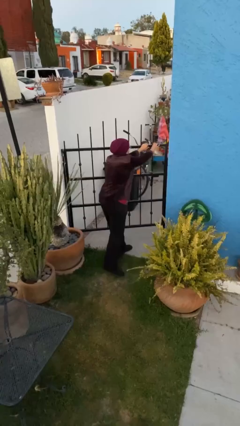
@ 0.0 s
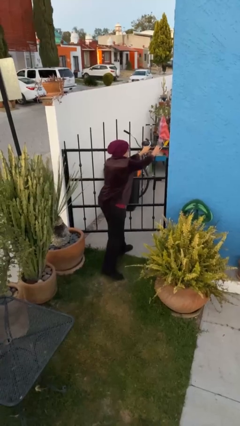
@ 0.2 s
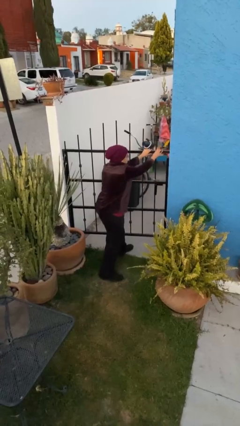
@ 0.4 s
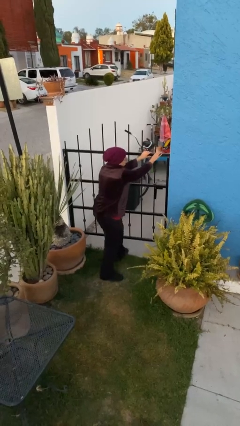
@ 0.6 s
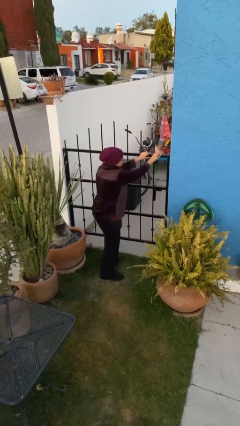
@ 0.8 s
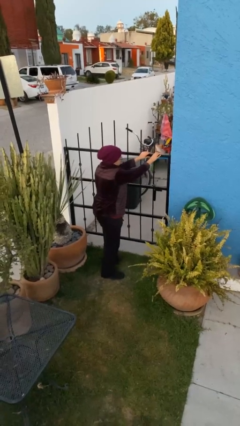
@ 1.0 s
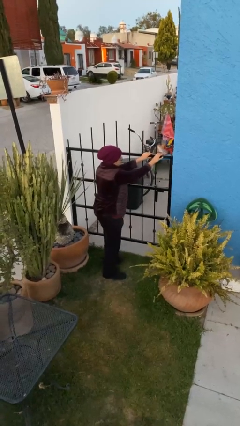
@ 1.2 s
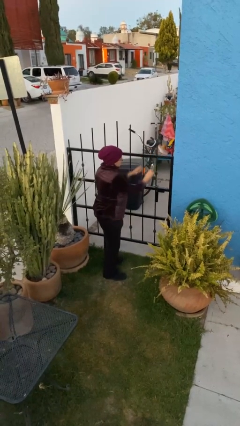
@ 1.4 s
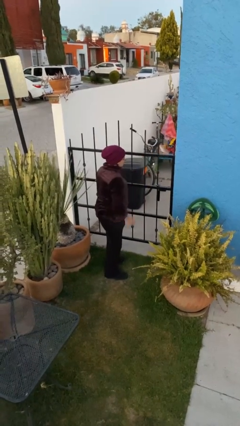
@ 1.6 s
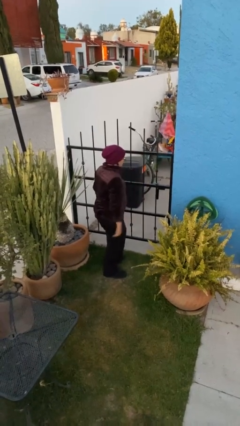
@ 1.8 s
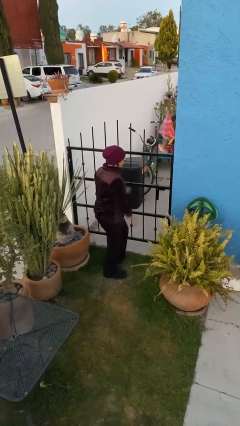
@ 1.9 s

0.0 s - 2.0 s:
person closes facility door

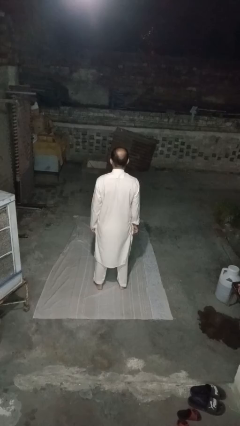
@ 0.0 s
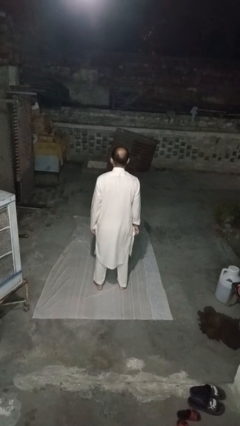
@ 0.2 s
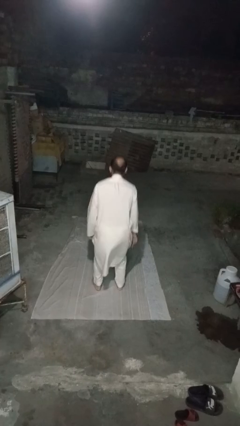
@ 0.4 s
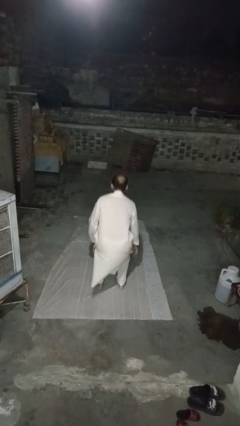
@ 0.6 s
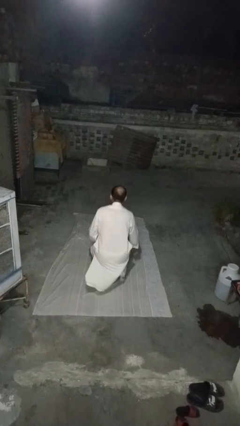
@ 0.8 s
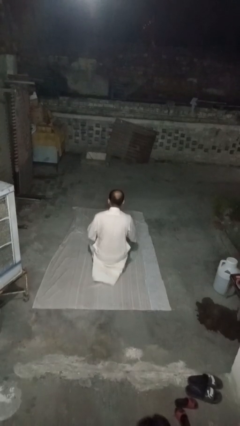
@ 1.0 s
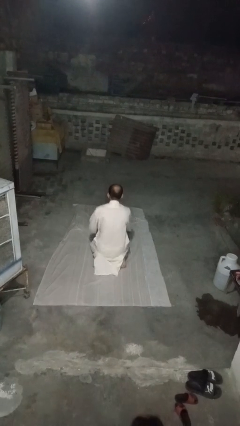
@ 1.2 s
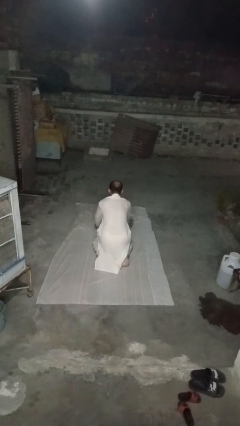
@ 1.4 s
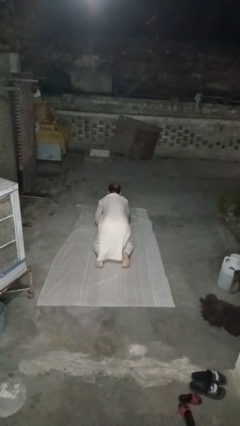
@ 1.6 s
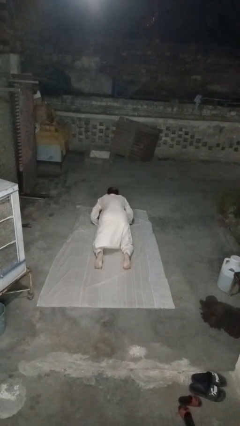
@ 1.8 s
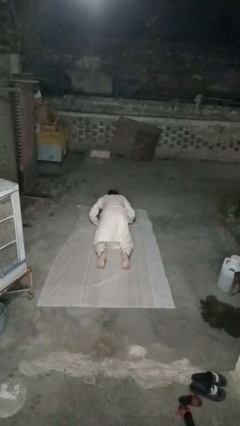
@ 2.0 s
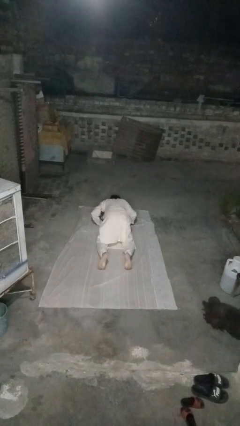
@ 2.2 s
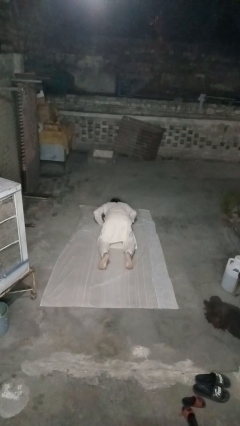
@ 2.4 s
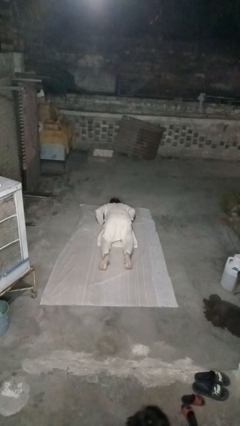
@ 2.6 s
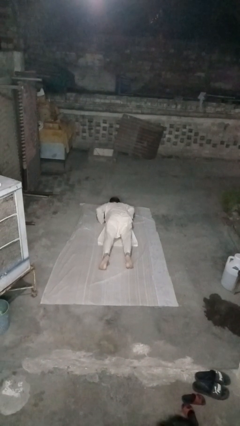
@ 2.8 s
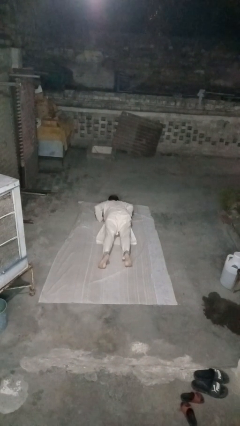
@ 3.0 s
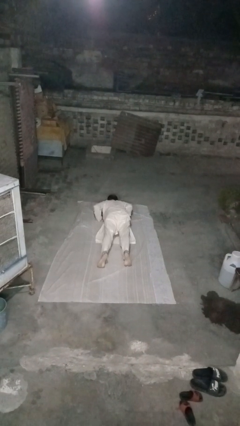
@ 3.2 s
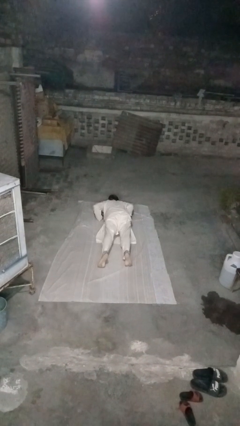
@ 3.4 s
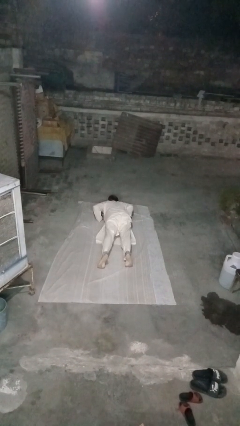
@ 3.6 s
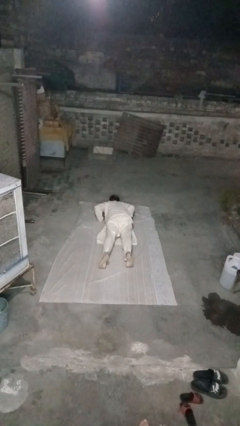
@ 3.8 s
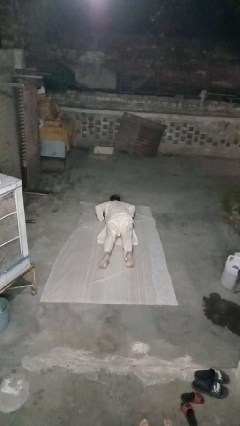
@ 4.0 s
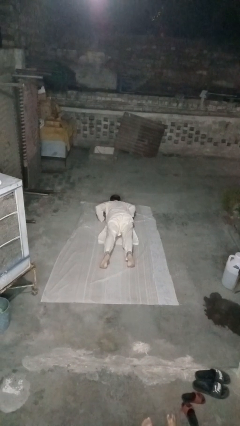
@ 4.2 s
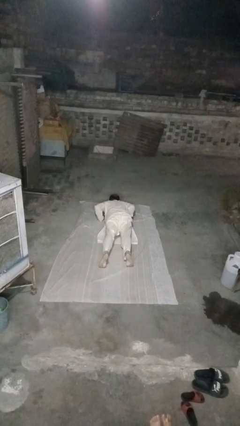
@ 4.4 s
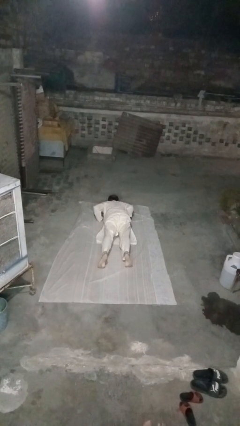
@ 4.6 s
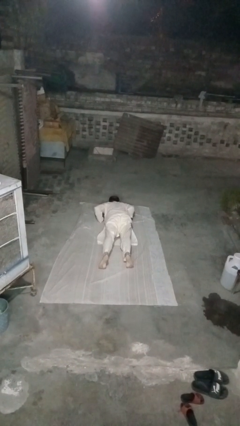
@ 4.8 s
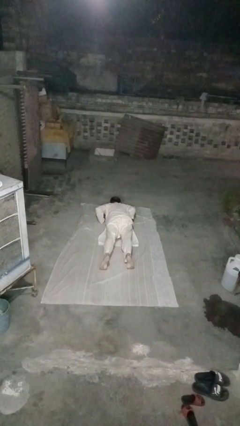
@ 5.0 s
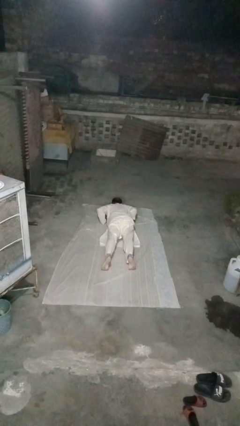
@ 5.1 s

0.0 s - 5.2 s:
person exercises with plank

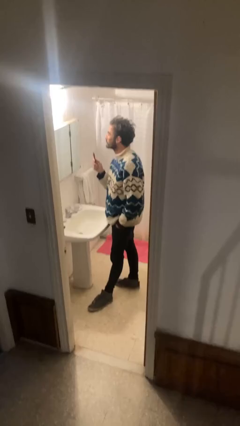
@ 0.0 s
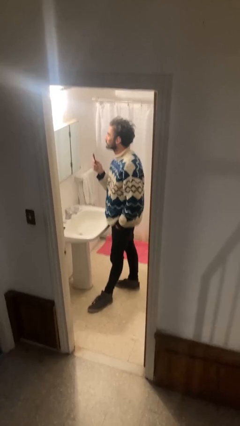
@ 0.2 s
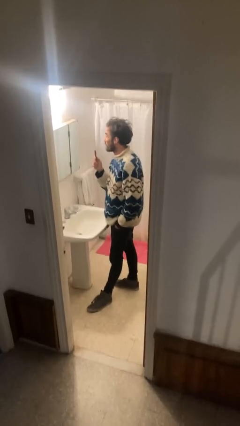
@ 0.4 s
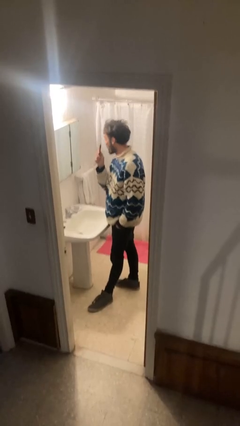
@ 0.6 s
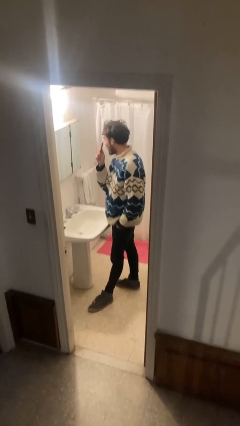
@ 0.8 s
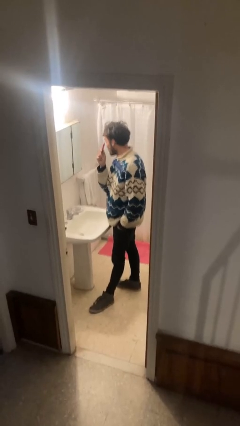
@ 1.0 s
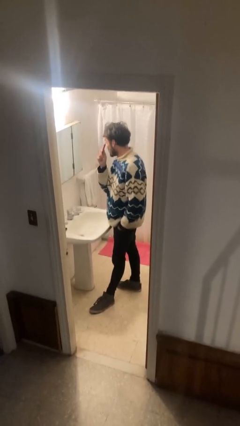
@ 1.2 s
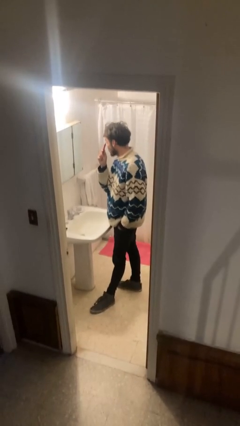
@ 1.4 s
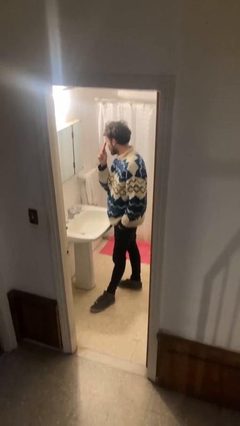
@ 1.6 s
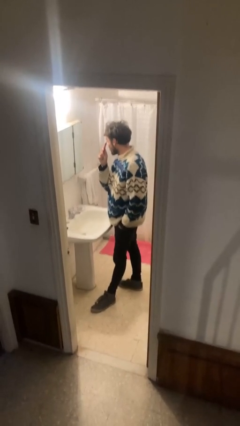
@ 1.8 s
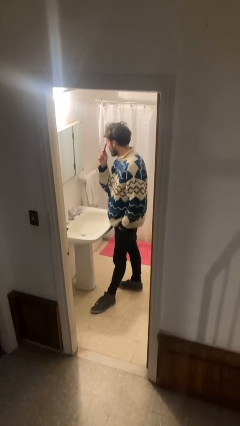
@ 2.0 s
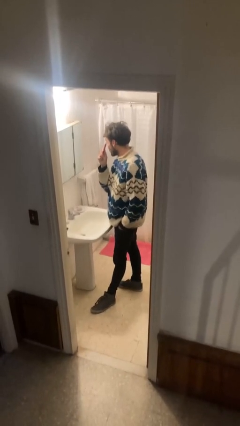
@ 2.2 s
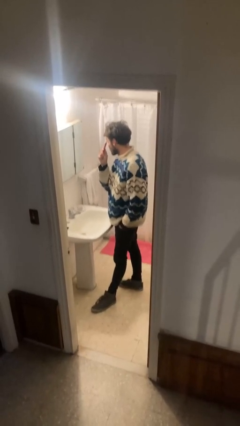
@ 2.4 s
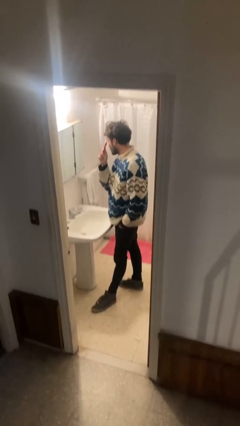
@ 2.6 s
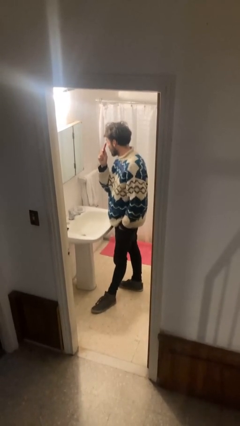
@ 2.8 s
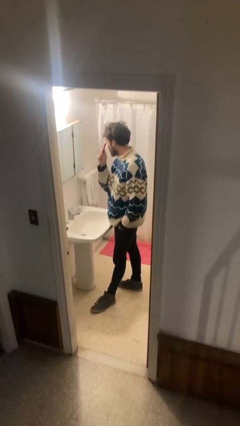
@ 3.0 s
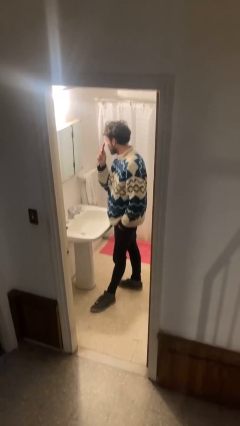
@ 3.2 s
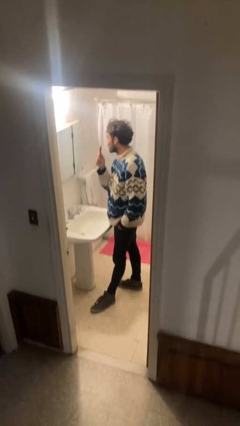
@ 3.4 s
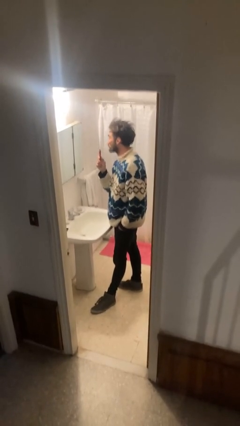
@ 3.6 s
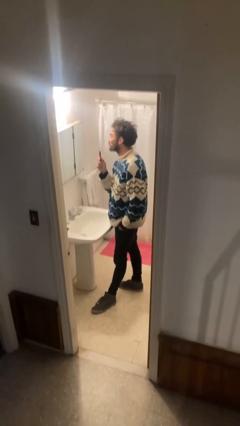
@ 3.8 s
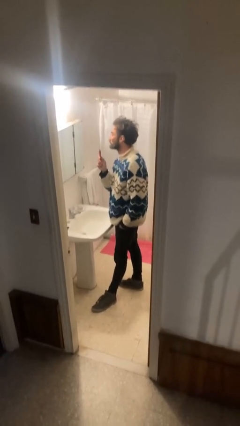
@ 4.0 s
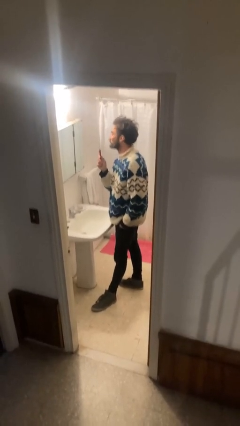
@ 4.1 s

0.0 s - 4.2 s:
person applies eye makeup

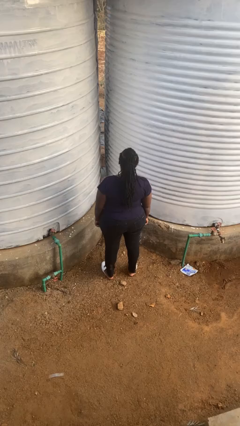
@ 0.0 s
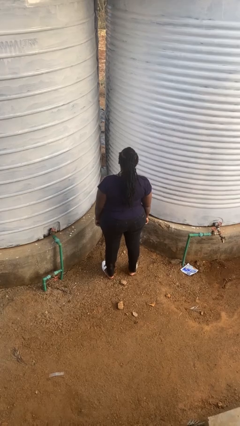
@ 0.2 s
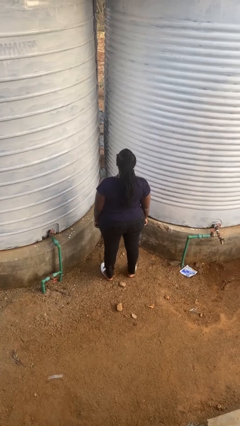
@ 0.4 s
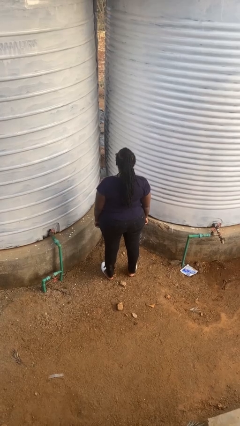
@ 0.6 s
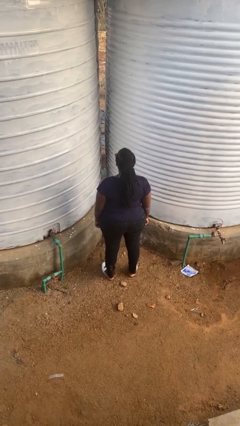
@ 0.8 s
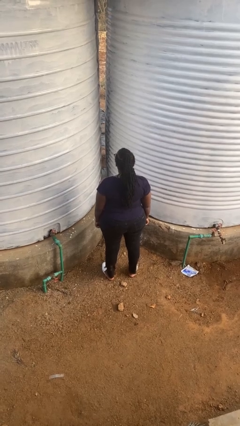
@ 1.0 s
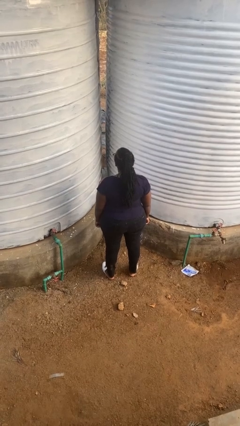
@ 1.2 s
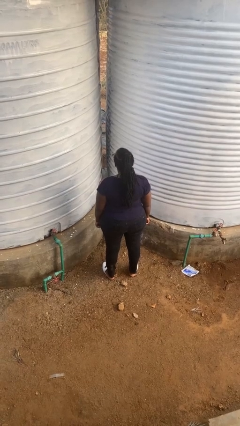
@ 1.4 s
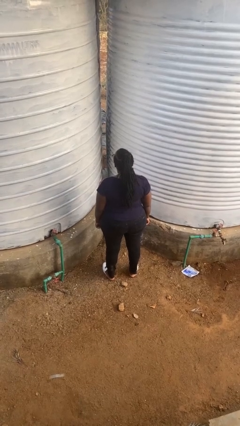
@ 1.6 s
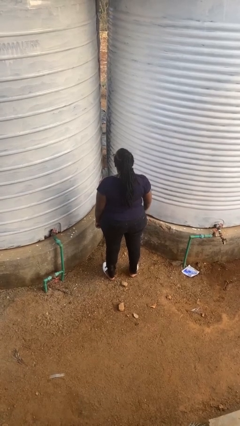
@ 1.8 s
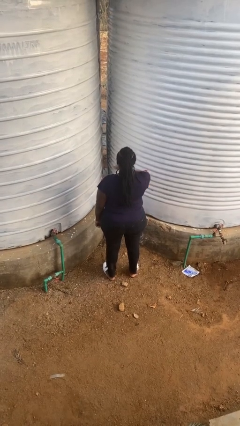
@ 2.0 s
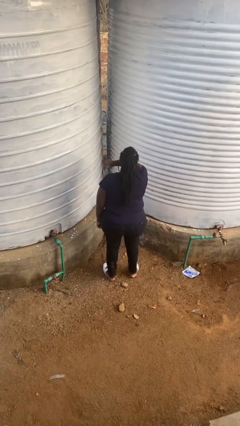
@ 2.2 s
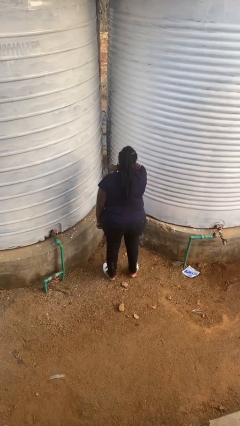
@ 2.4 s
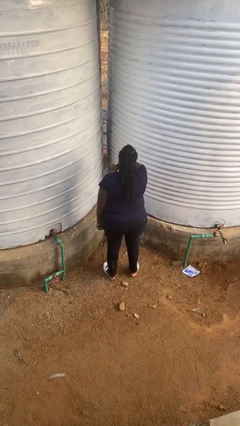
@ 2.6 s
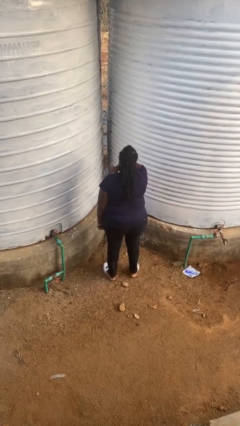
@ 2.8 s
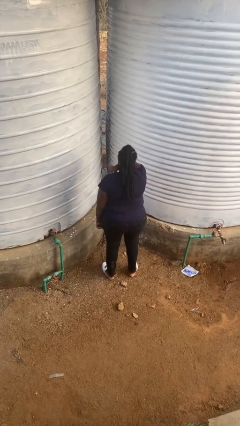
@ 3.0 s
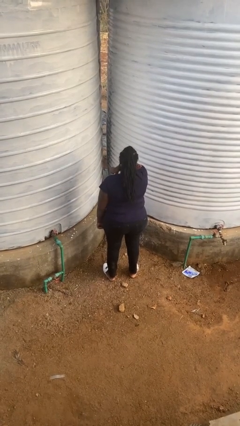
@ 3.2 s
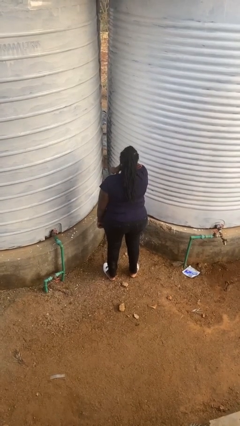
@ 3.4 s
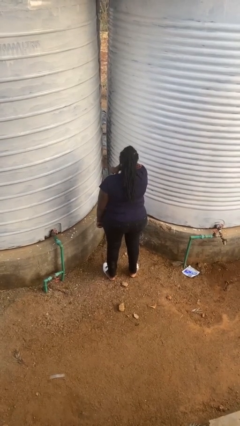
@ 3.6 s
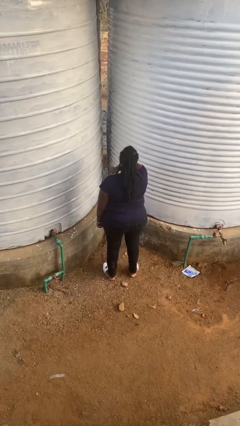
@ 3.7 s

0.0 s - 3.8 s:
person sneezes into arm

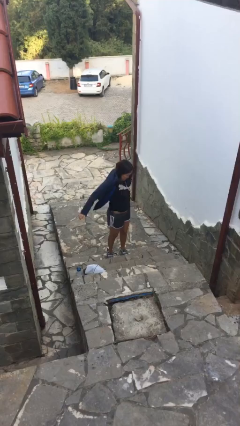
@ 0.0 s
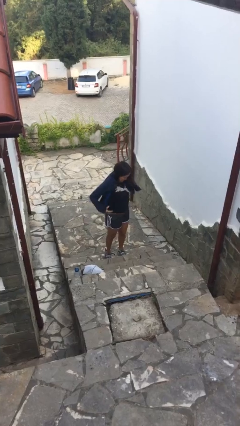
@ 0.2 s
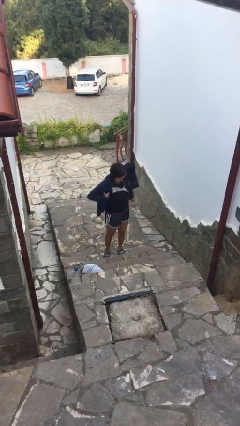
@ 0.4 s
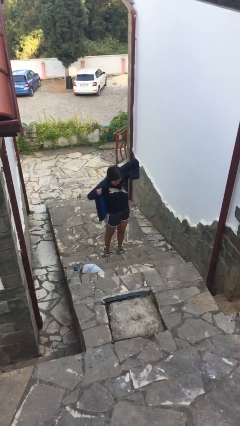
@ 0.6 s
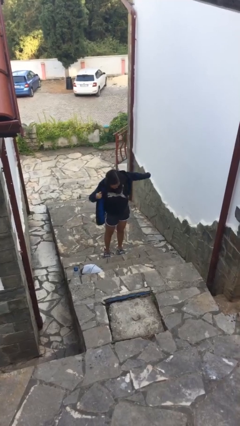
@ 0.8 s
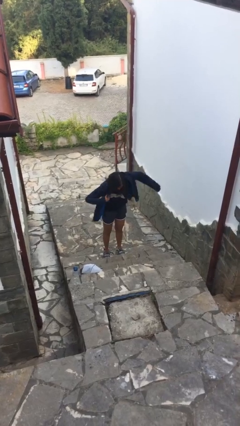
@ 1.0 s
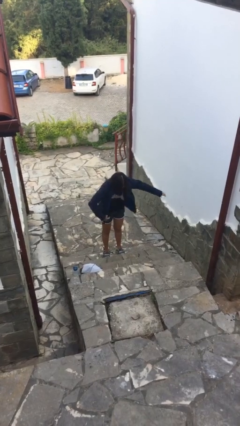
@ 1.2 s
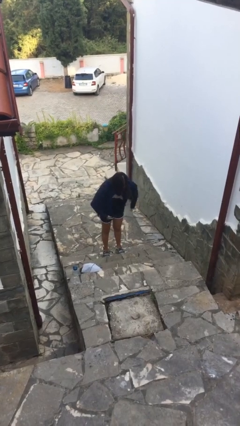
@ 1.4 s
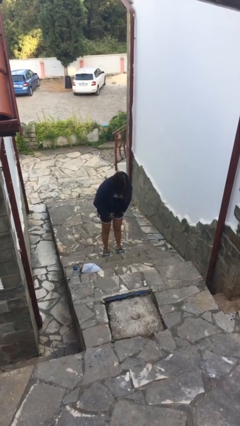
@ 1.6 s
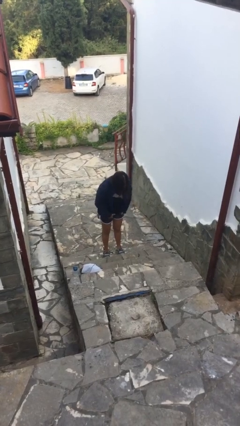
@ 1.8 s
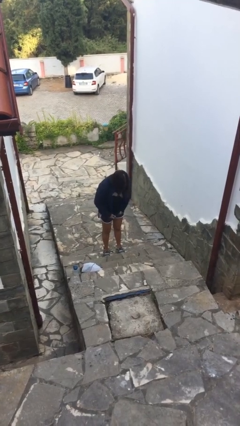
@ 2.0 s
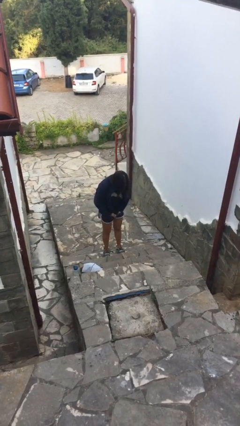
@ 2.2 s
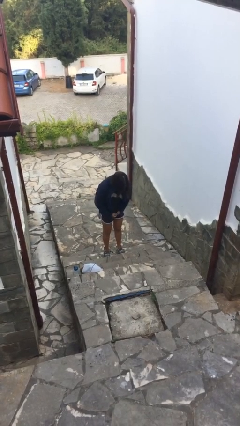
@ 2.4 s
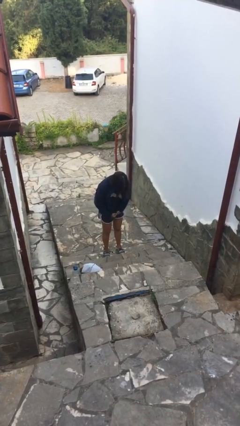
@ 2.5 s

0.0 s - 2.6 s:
person puts on jacket
